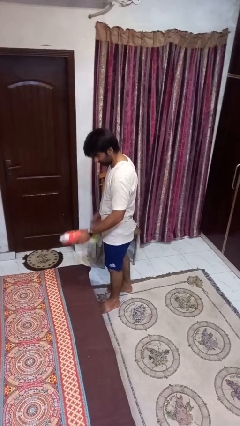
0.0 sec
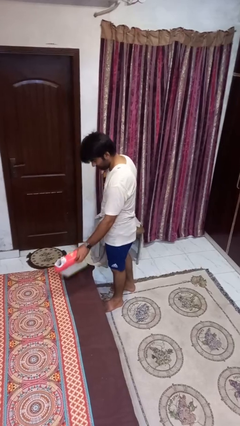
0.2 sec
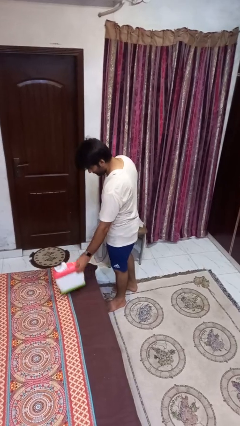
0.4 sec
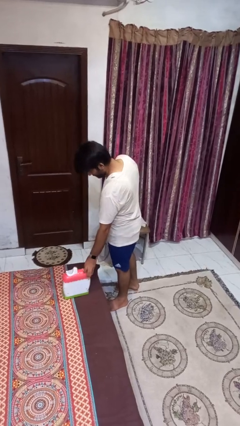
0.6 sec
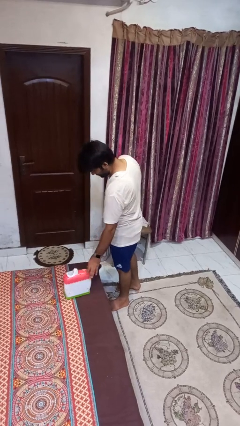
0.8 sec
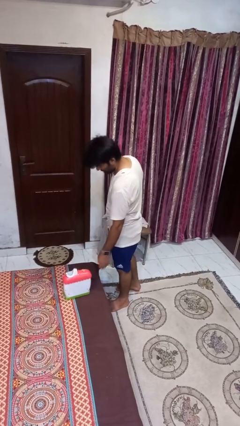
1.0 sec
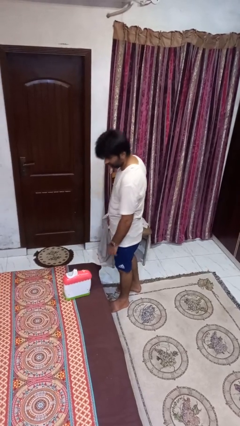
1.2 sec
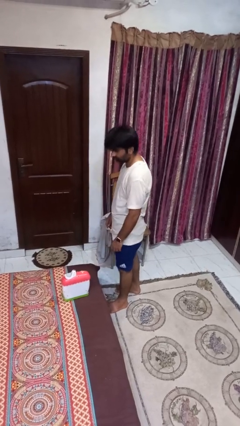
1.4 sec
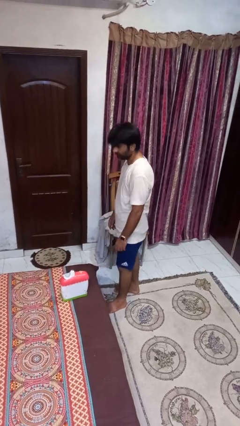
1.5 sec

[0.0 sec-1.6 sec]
person puts down object on bed

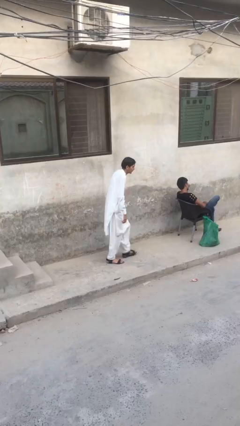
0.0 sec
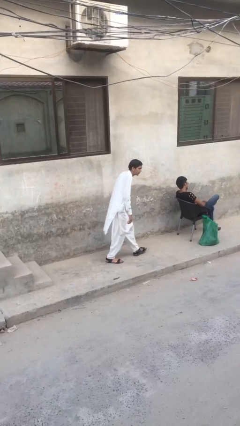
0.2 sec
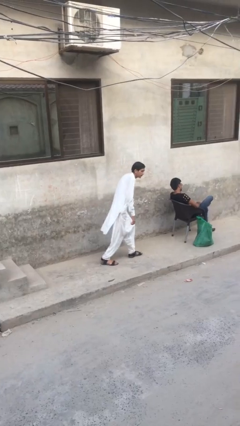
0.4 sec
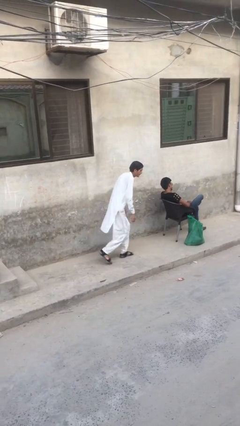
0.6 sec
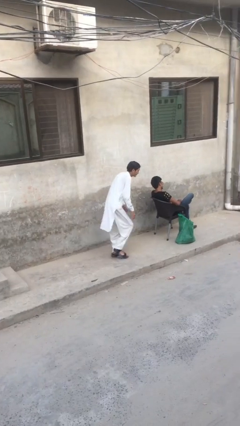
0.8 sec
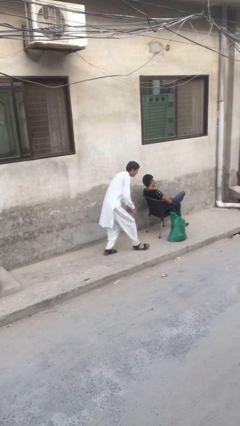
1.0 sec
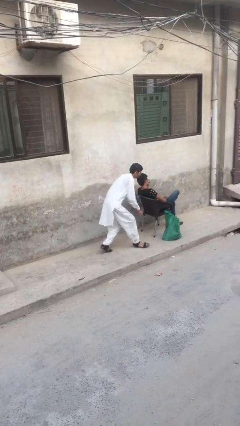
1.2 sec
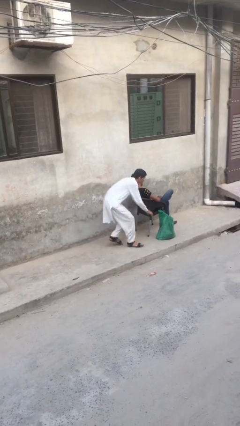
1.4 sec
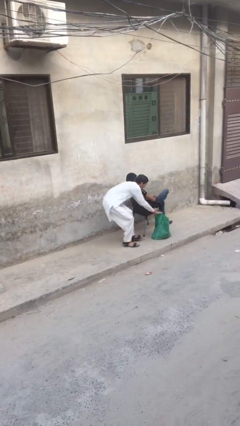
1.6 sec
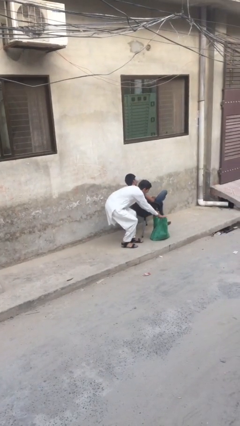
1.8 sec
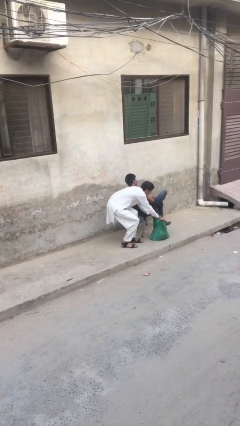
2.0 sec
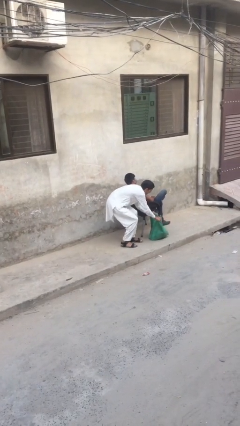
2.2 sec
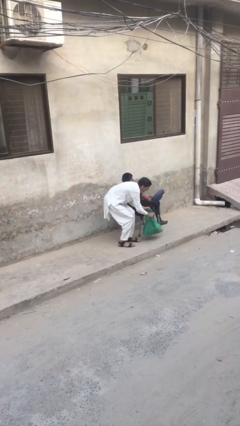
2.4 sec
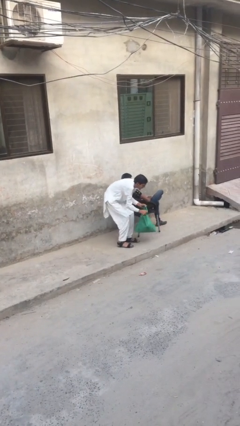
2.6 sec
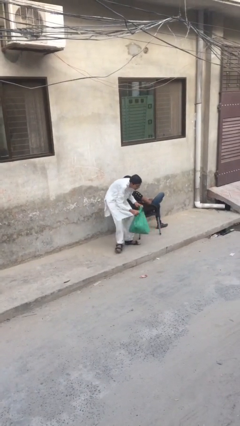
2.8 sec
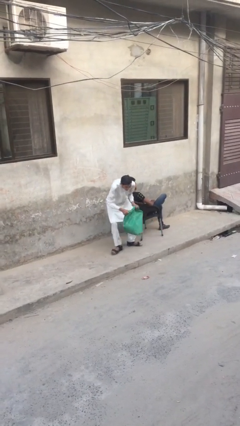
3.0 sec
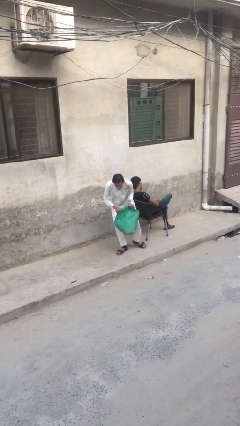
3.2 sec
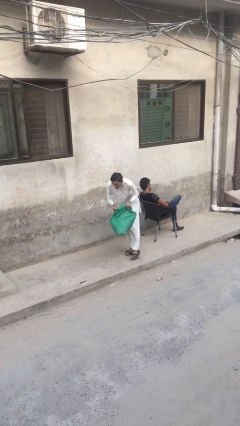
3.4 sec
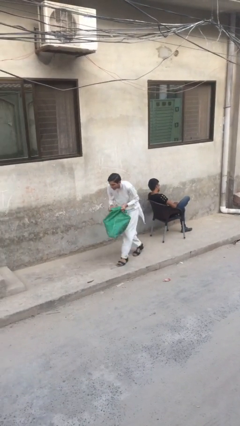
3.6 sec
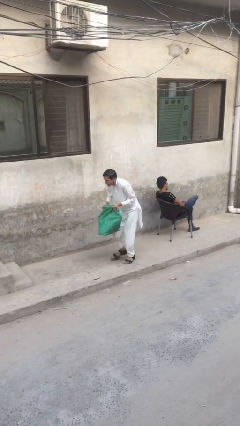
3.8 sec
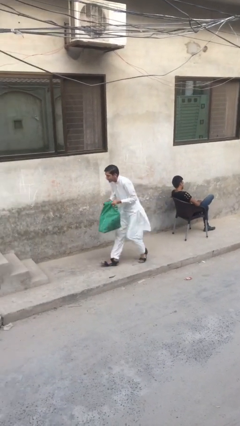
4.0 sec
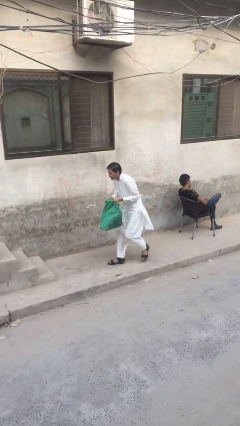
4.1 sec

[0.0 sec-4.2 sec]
person steals object from person

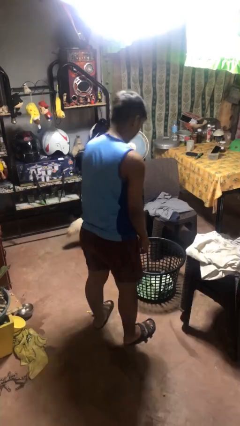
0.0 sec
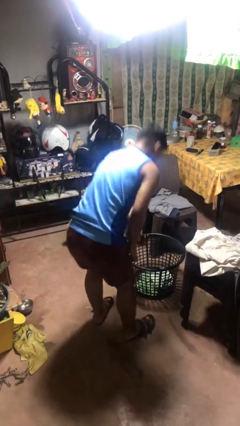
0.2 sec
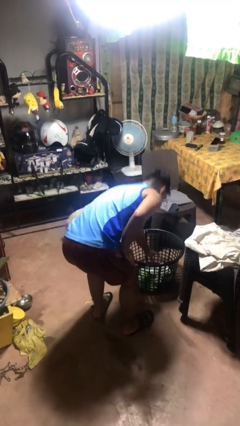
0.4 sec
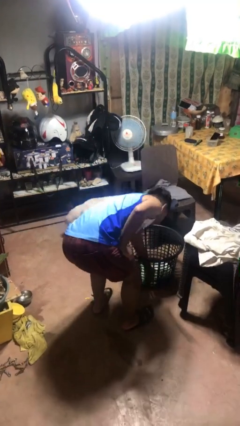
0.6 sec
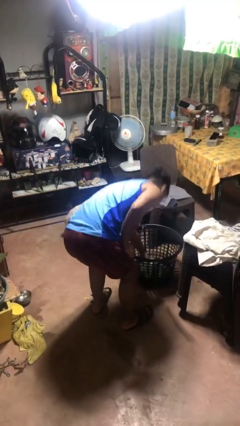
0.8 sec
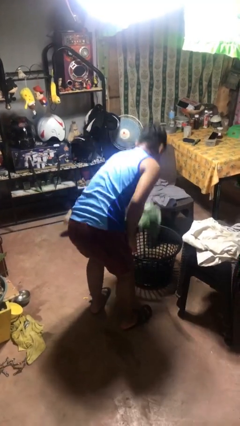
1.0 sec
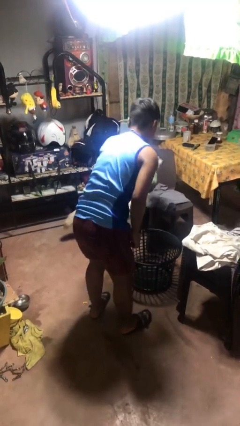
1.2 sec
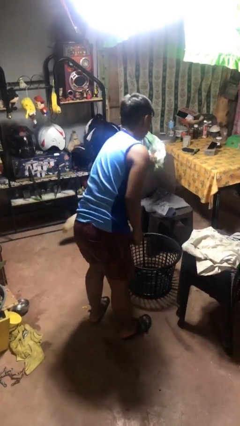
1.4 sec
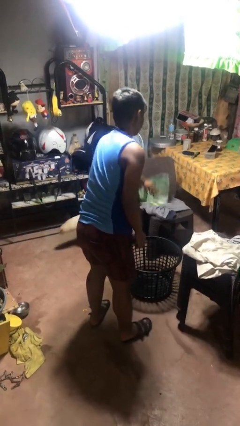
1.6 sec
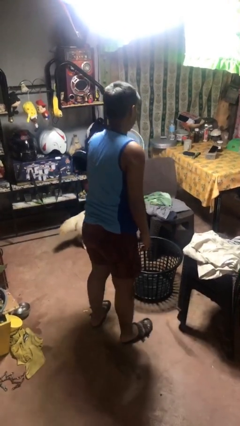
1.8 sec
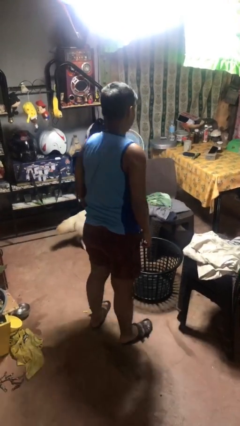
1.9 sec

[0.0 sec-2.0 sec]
person takes object from basket

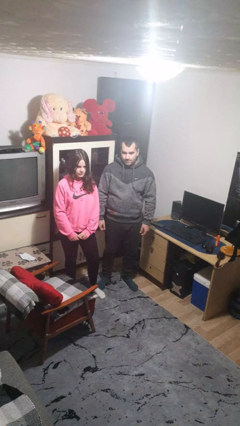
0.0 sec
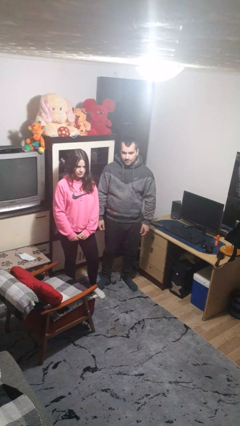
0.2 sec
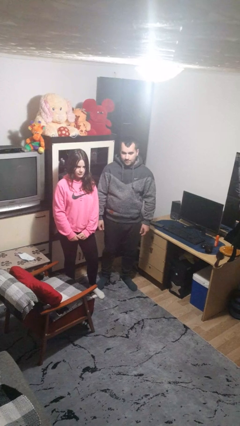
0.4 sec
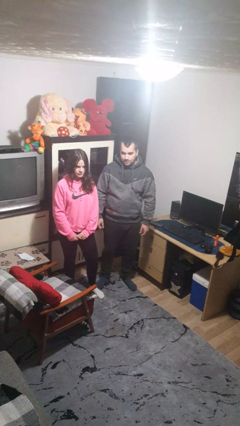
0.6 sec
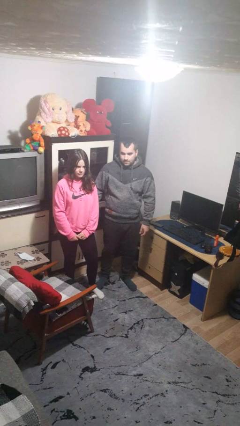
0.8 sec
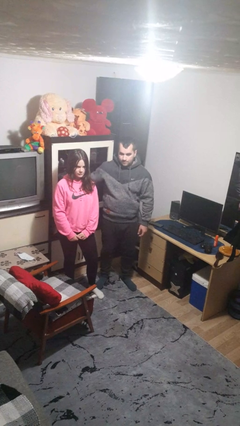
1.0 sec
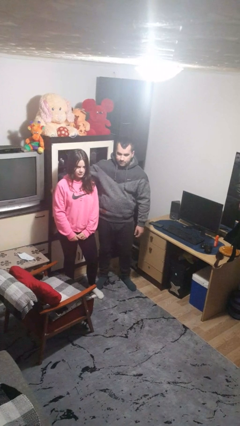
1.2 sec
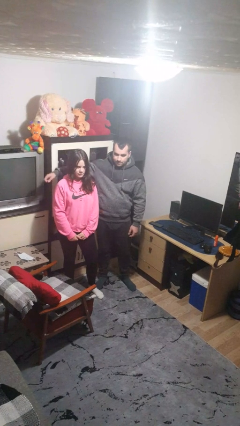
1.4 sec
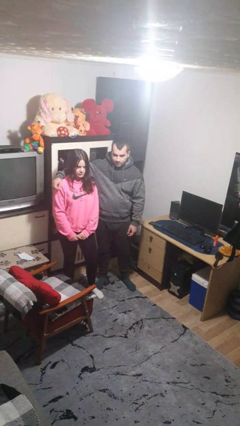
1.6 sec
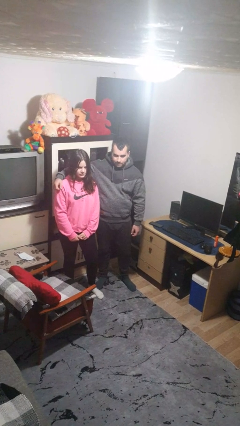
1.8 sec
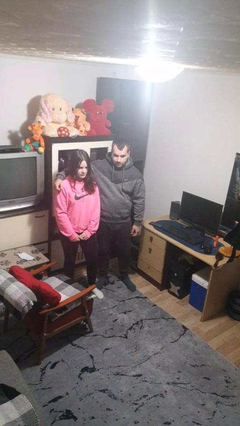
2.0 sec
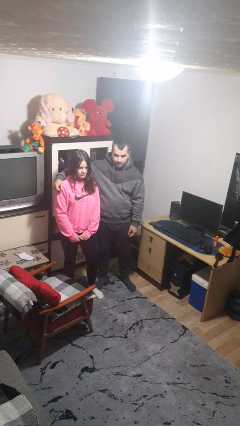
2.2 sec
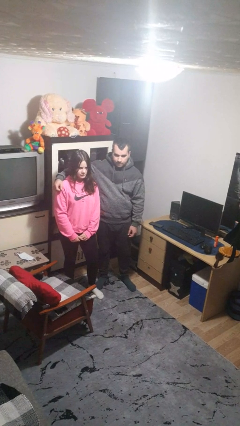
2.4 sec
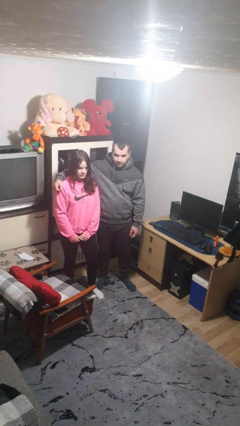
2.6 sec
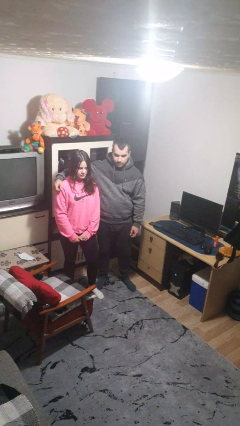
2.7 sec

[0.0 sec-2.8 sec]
person hugs person from side

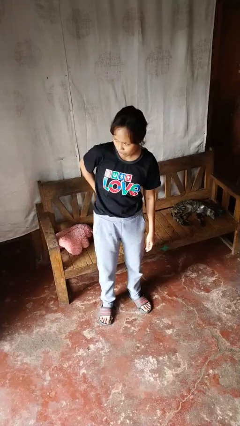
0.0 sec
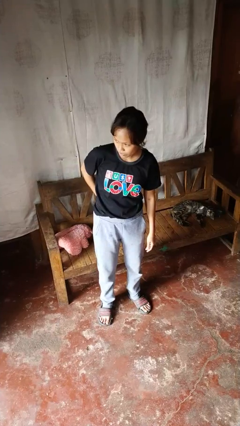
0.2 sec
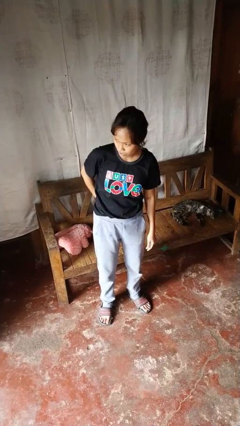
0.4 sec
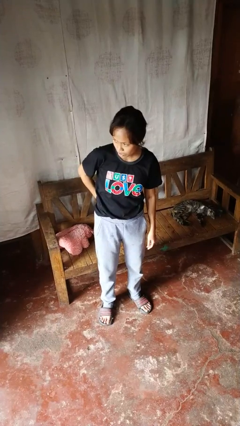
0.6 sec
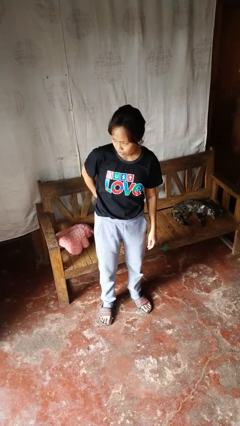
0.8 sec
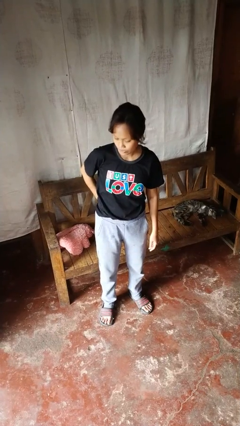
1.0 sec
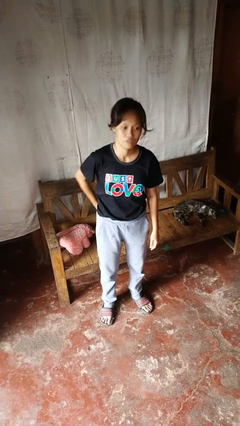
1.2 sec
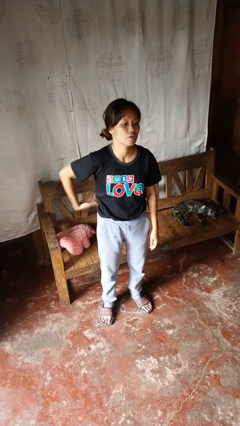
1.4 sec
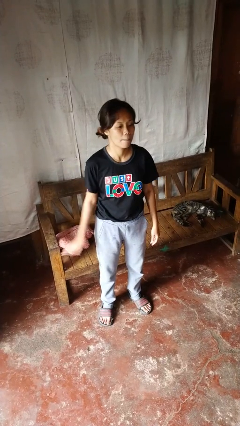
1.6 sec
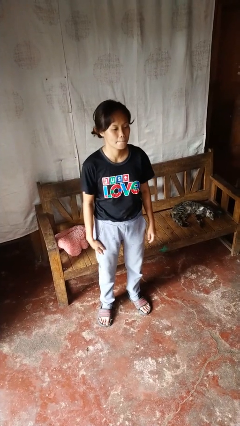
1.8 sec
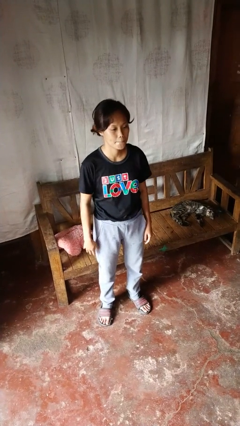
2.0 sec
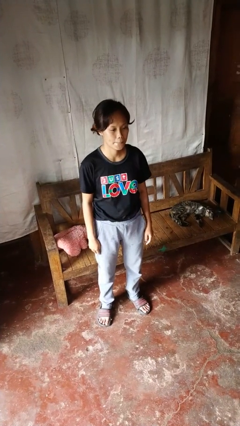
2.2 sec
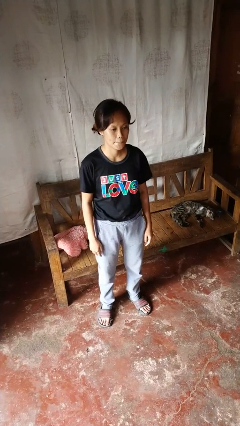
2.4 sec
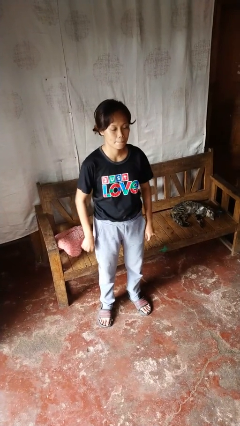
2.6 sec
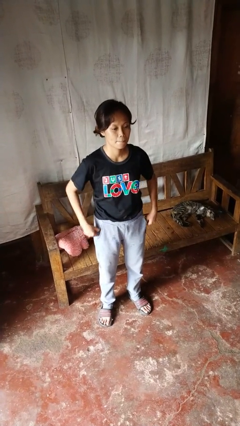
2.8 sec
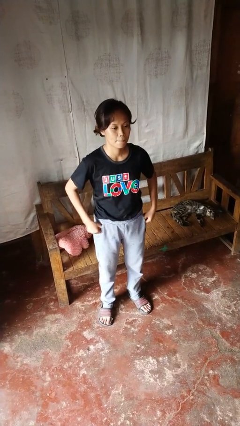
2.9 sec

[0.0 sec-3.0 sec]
person puts hands in back pockets

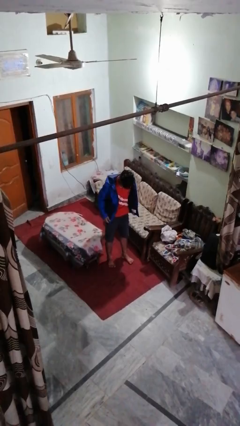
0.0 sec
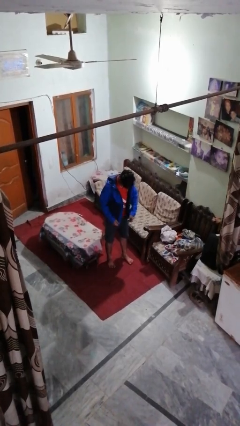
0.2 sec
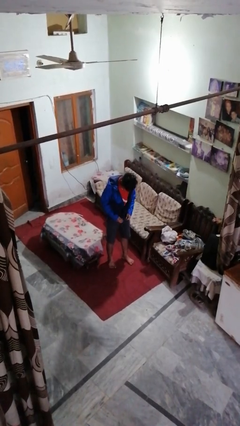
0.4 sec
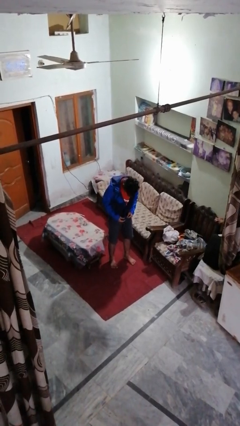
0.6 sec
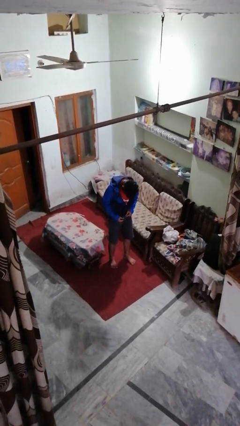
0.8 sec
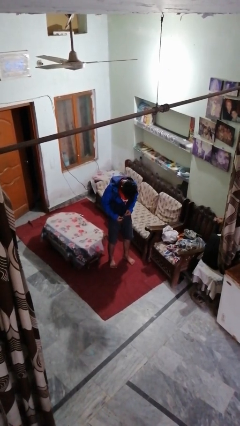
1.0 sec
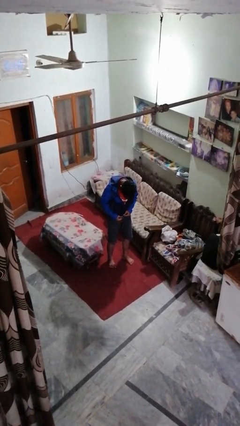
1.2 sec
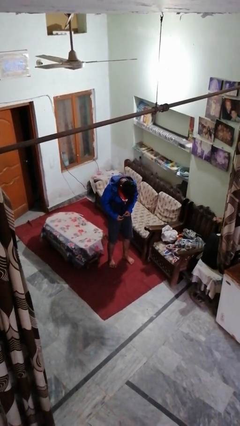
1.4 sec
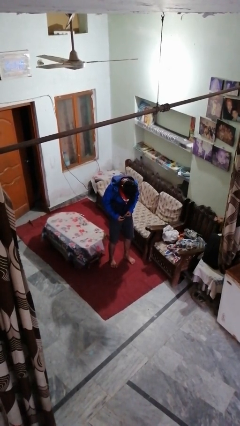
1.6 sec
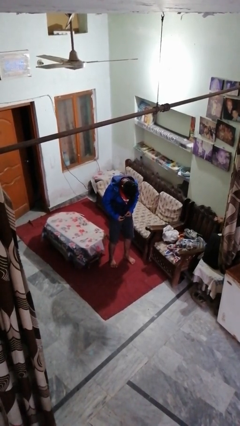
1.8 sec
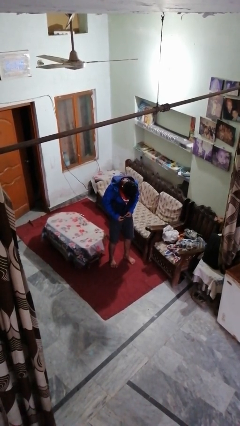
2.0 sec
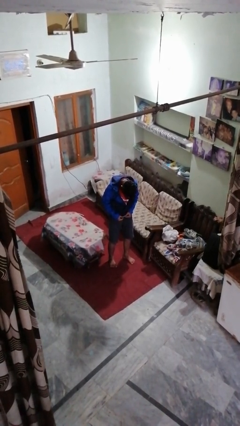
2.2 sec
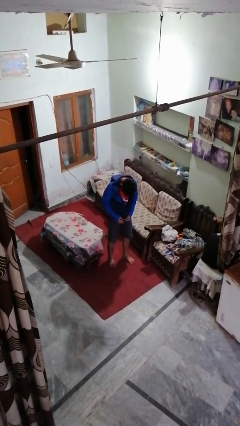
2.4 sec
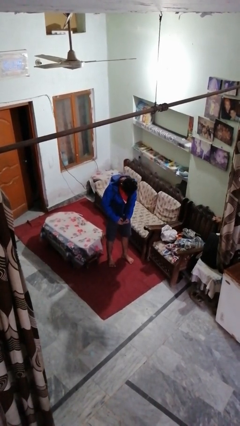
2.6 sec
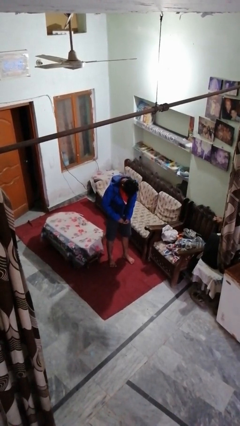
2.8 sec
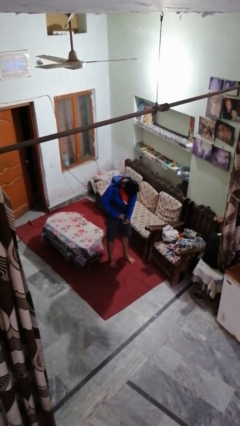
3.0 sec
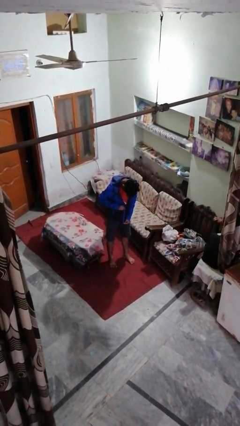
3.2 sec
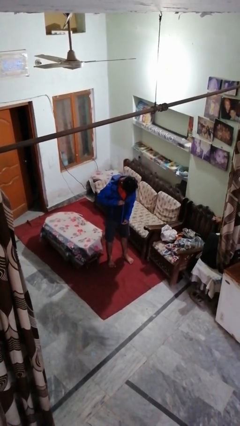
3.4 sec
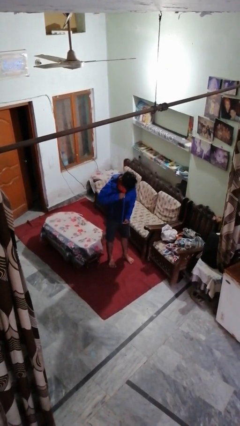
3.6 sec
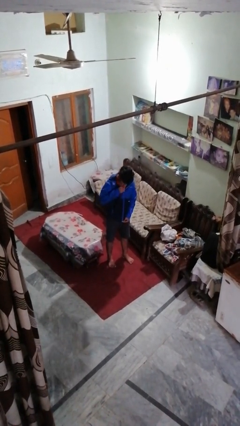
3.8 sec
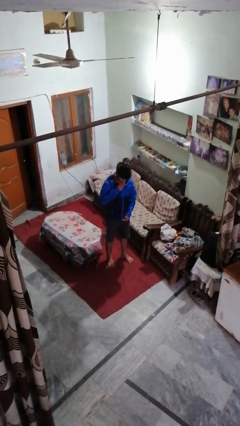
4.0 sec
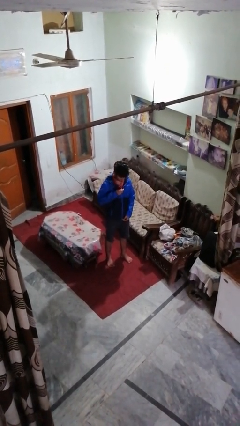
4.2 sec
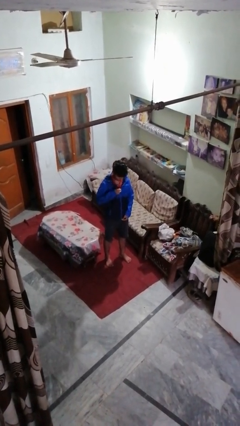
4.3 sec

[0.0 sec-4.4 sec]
person zips up jacket
